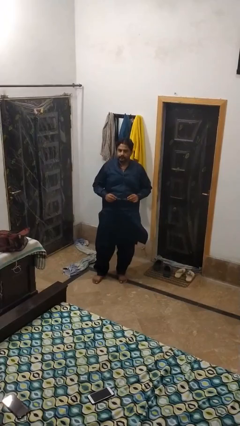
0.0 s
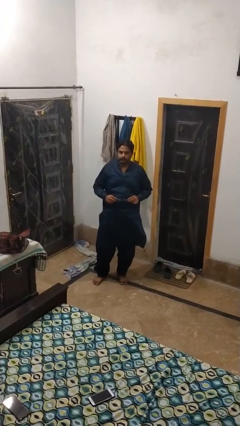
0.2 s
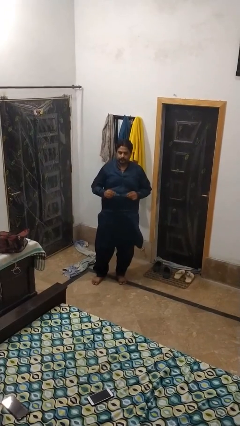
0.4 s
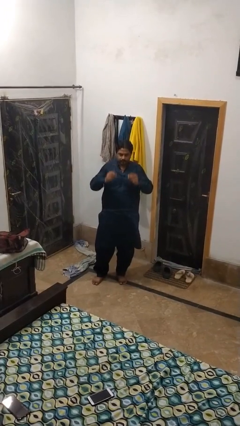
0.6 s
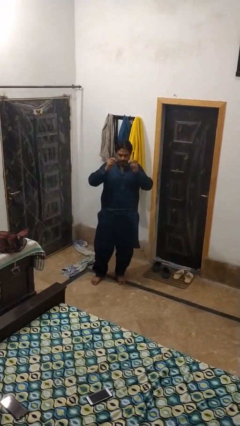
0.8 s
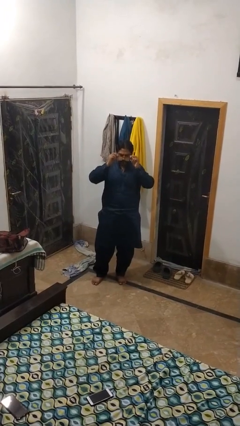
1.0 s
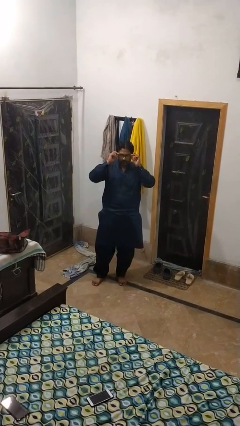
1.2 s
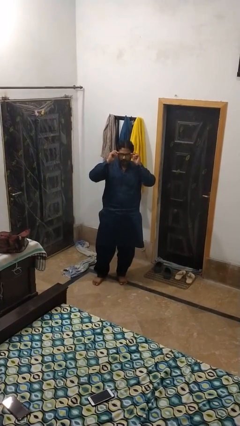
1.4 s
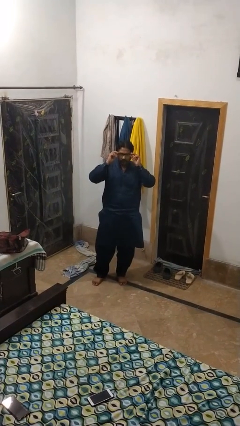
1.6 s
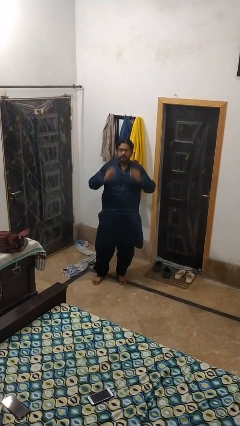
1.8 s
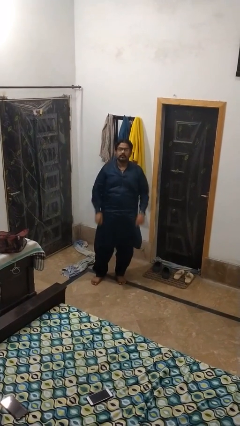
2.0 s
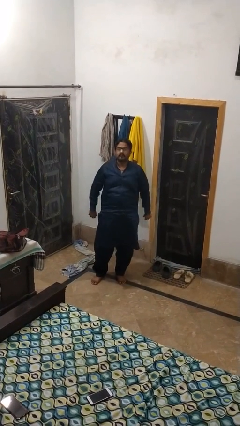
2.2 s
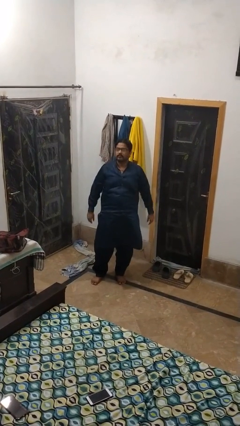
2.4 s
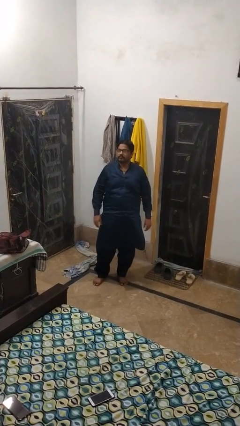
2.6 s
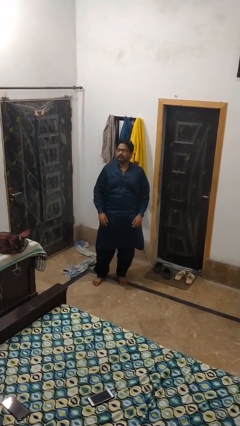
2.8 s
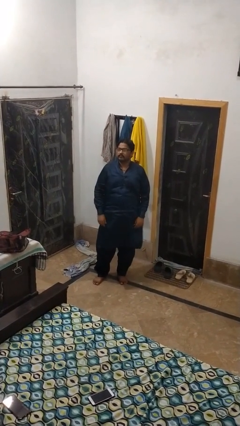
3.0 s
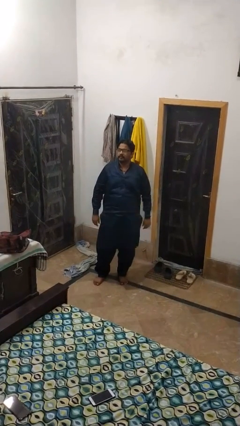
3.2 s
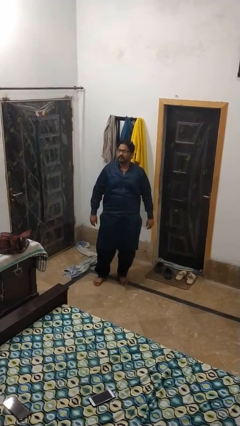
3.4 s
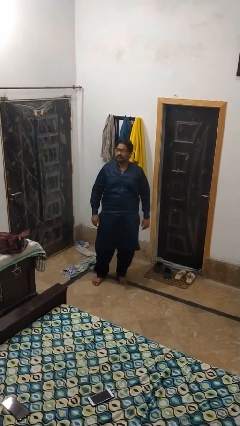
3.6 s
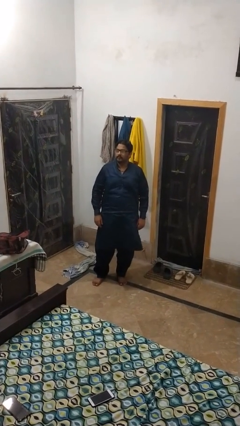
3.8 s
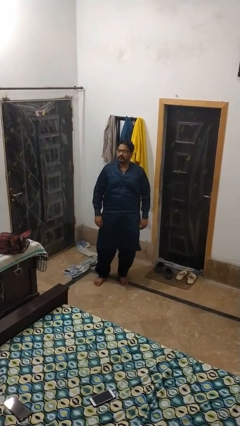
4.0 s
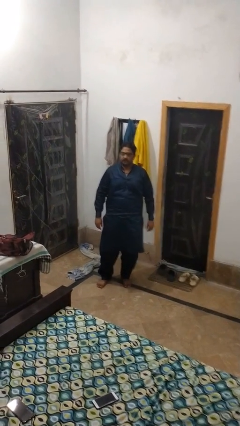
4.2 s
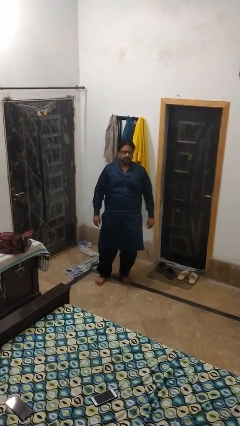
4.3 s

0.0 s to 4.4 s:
person puts on glasses

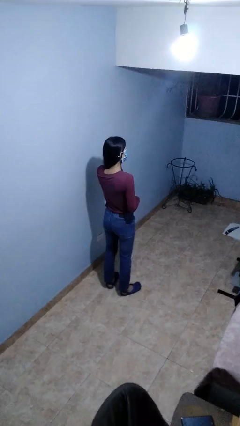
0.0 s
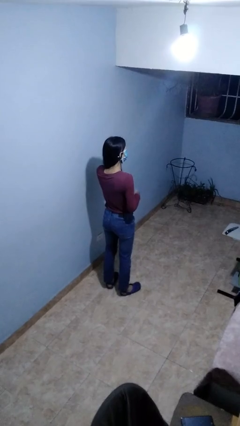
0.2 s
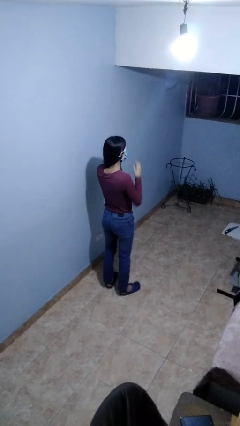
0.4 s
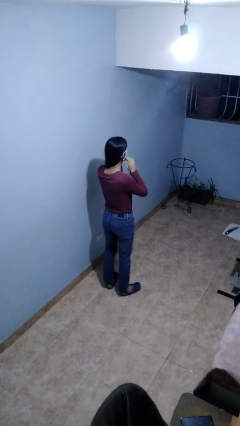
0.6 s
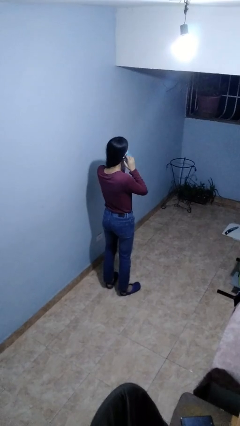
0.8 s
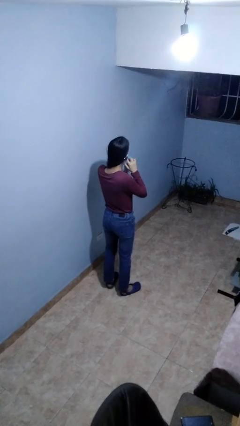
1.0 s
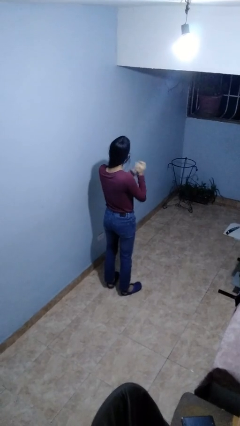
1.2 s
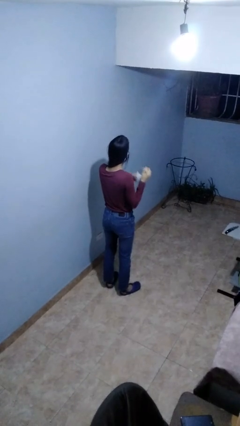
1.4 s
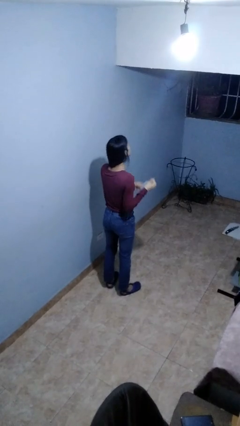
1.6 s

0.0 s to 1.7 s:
person takes off facemask

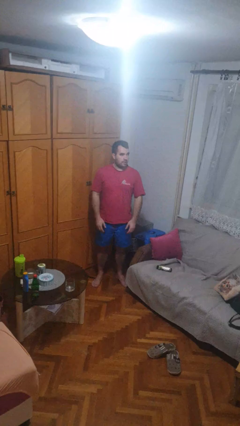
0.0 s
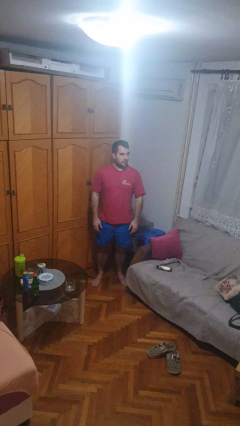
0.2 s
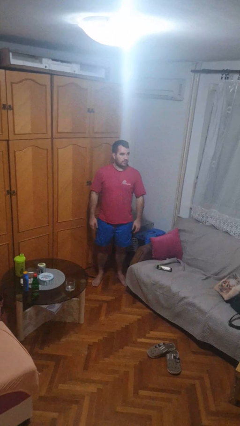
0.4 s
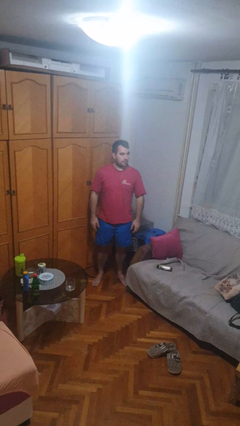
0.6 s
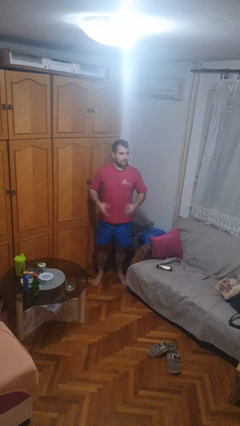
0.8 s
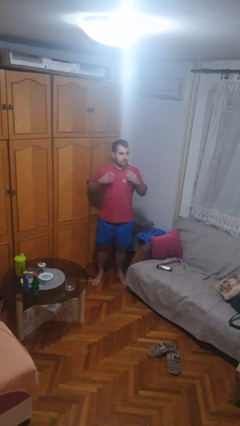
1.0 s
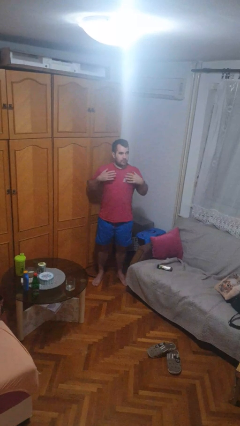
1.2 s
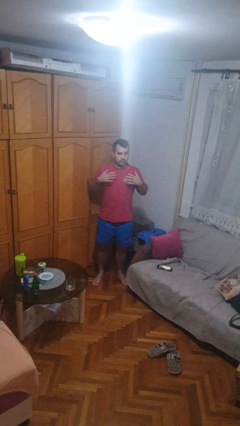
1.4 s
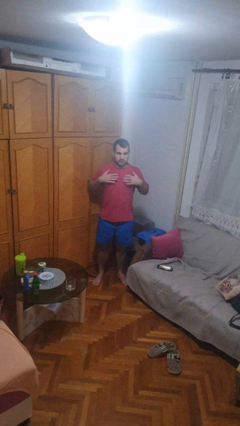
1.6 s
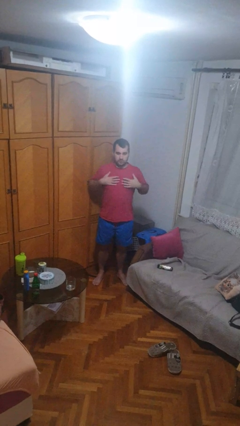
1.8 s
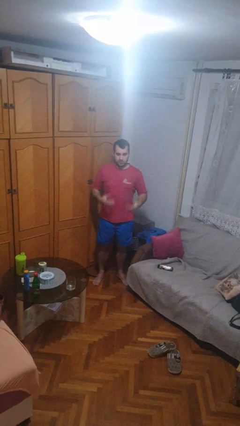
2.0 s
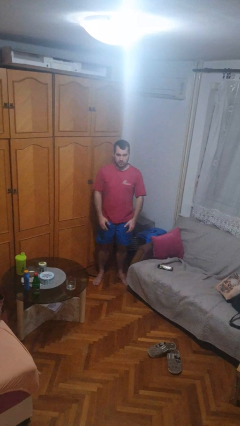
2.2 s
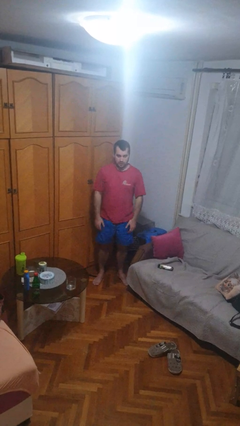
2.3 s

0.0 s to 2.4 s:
person drums on chest

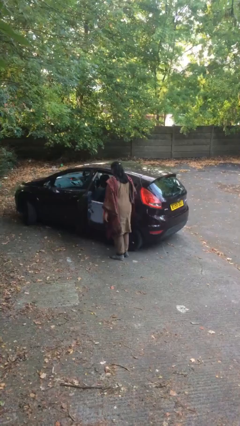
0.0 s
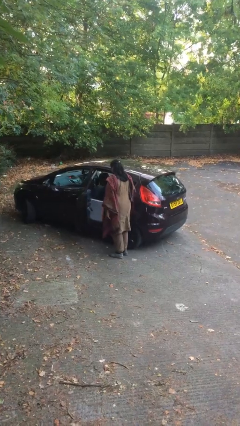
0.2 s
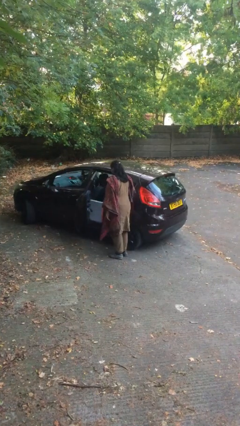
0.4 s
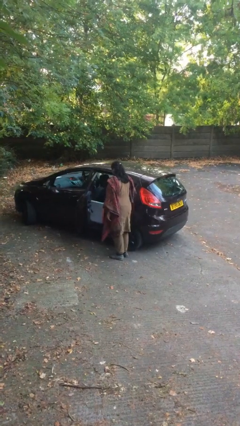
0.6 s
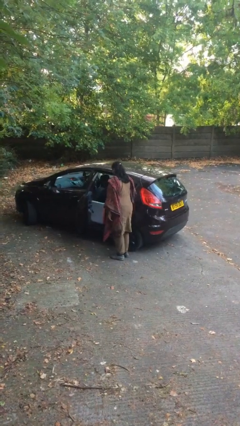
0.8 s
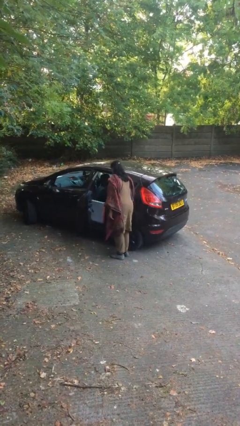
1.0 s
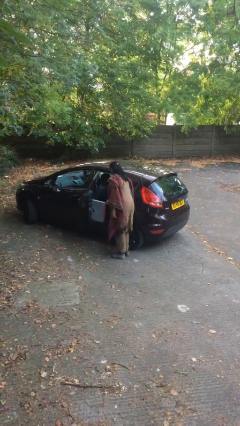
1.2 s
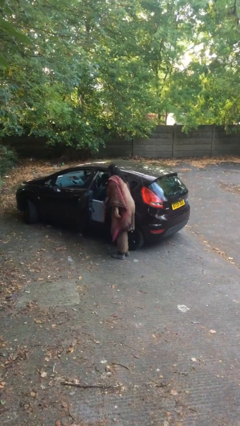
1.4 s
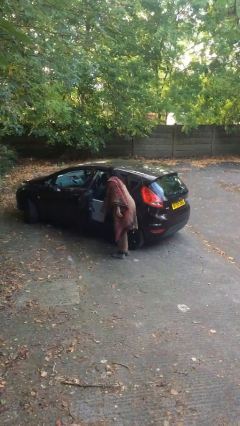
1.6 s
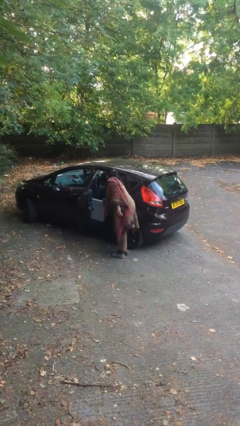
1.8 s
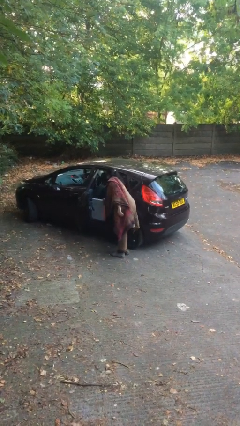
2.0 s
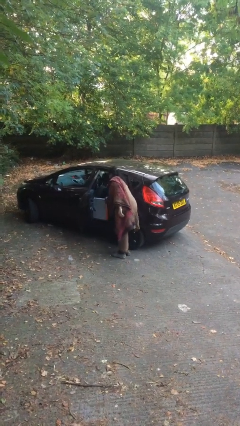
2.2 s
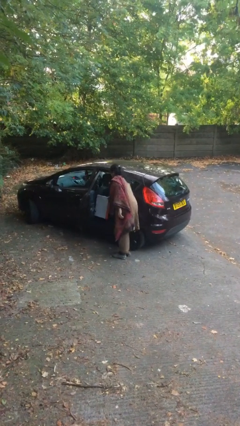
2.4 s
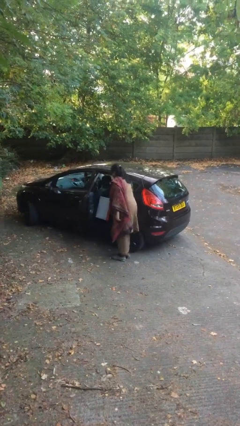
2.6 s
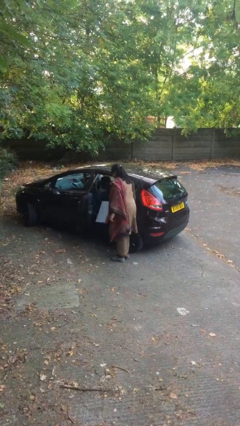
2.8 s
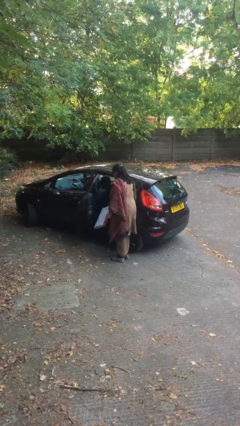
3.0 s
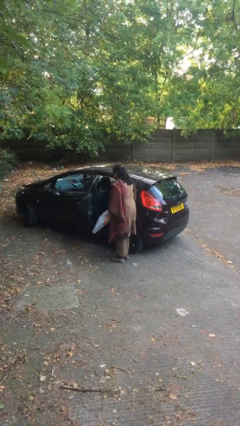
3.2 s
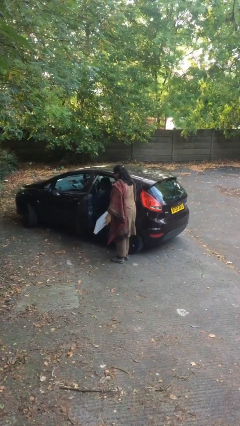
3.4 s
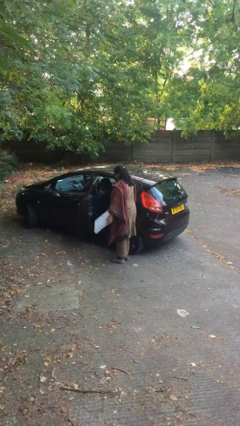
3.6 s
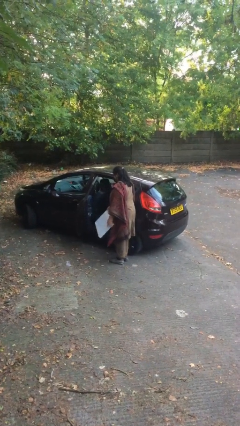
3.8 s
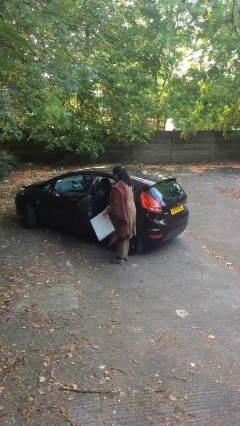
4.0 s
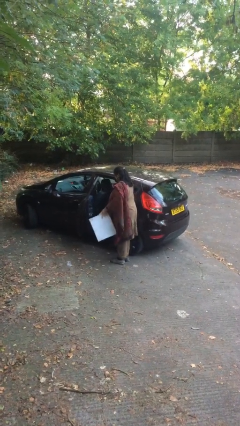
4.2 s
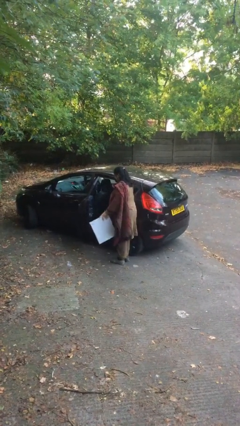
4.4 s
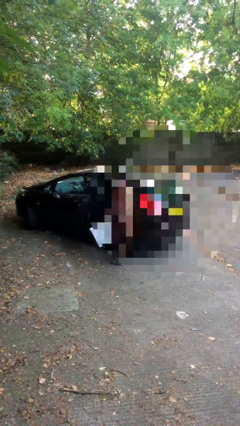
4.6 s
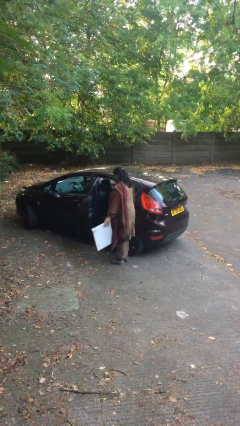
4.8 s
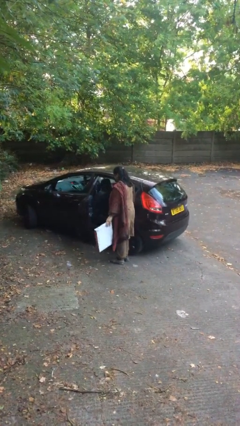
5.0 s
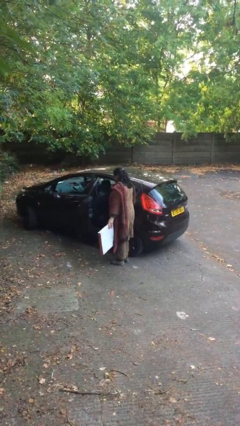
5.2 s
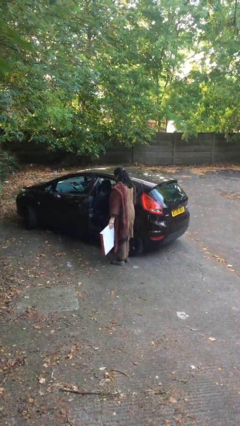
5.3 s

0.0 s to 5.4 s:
person unloads car

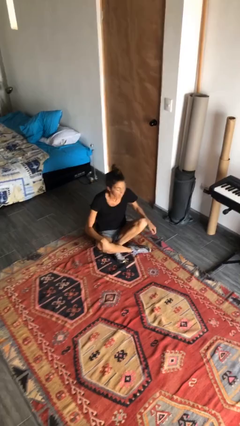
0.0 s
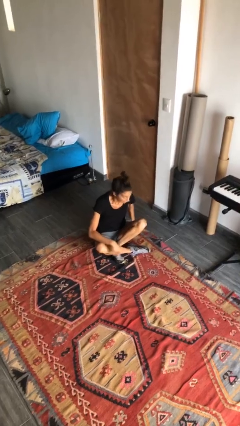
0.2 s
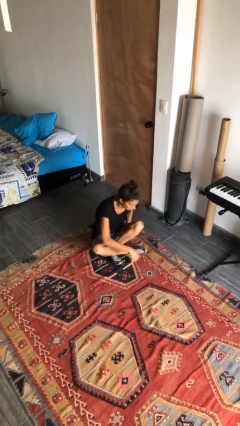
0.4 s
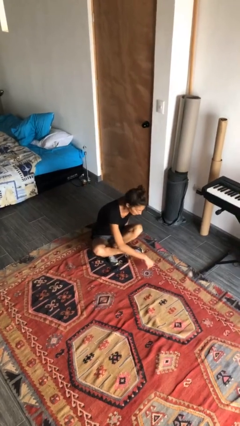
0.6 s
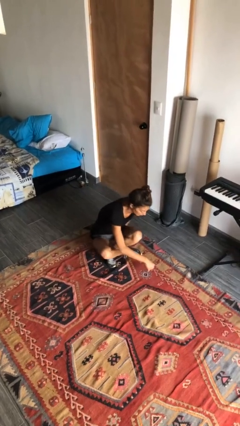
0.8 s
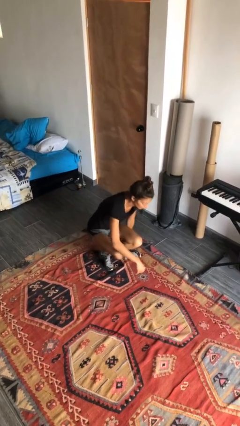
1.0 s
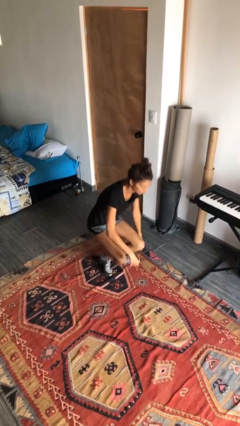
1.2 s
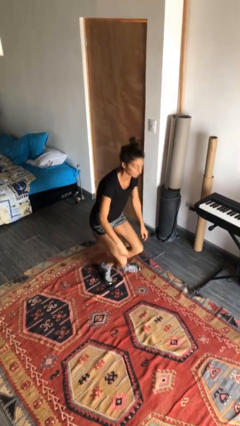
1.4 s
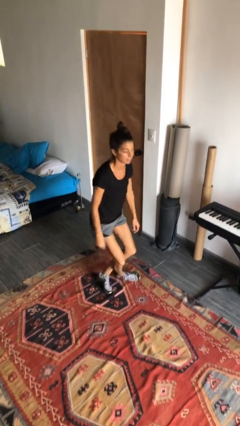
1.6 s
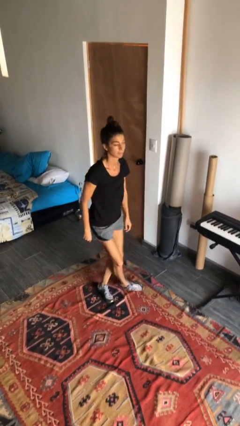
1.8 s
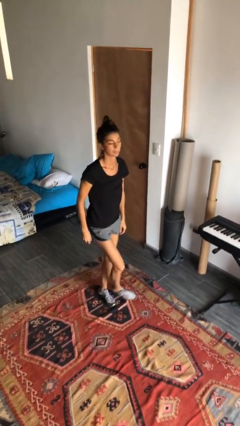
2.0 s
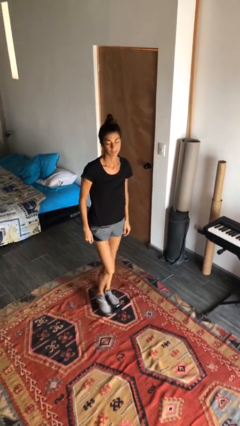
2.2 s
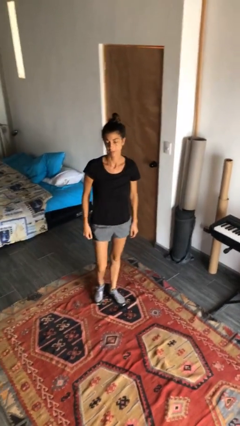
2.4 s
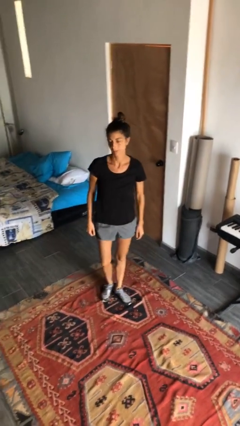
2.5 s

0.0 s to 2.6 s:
person stands up from floor

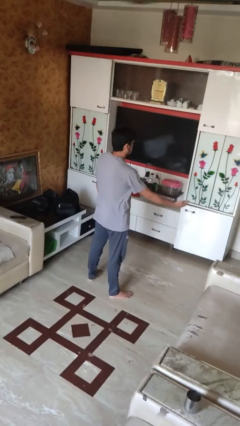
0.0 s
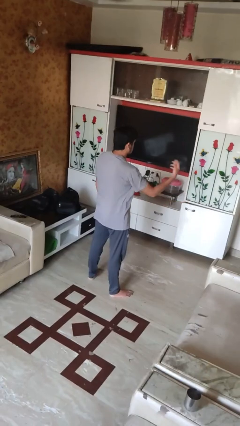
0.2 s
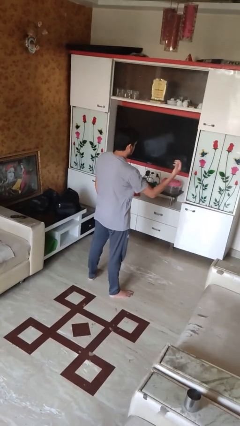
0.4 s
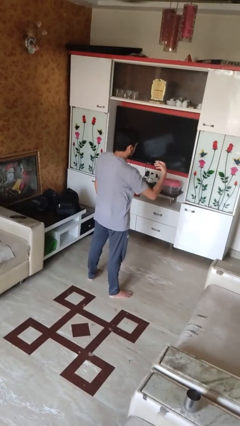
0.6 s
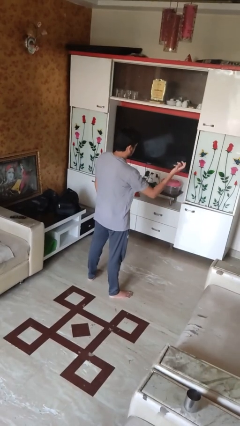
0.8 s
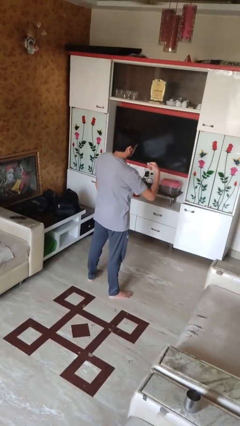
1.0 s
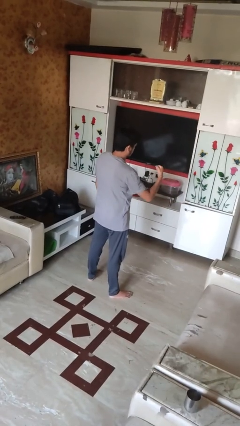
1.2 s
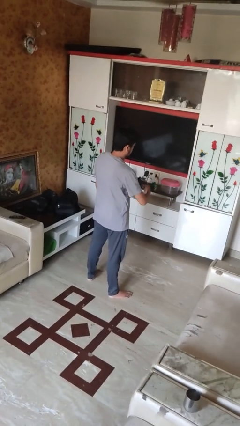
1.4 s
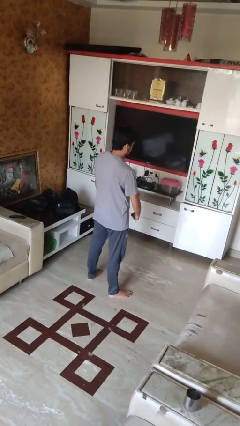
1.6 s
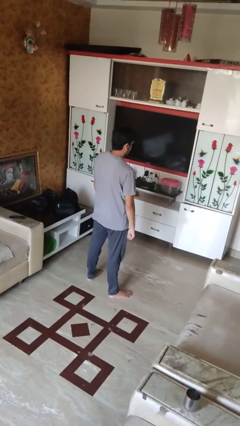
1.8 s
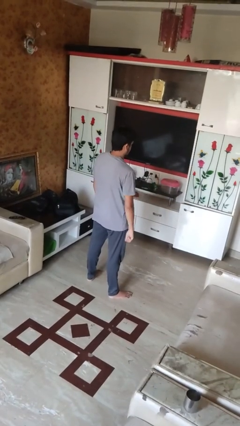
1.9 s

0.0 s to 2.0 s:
person gestures come here
